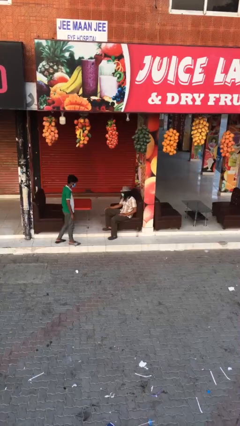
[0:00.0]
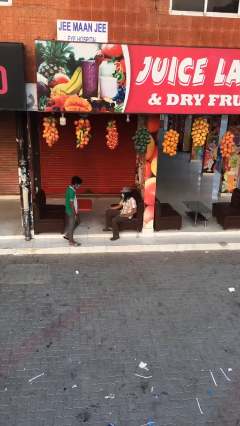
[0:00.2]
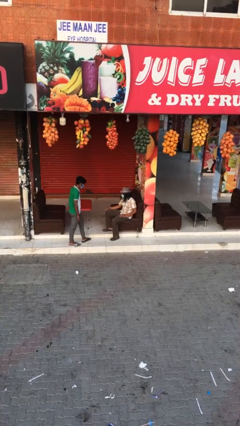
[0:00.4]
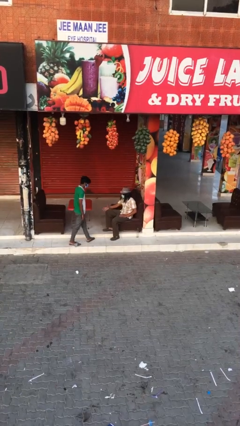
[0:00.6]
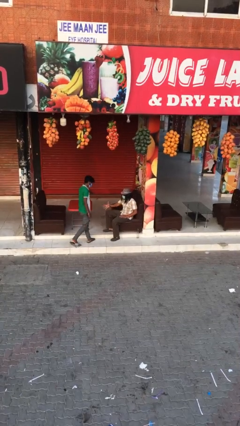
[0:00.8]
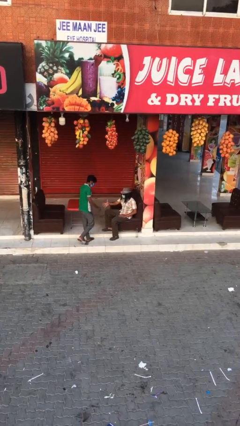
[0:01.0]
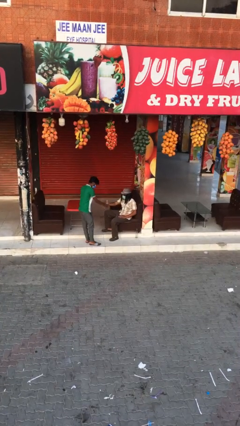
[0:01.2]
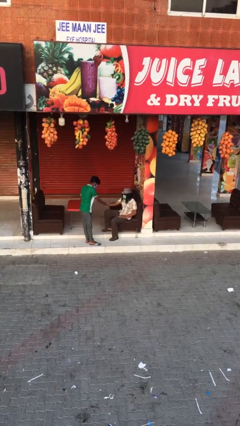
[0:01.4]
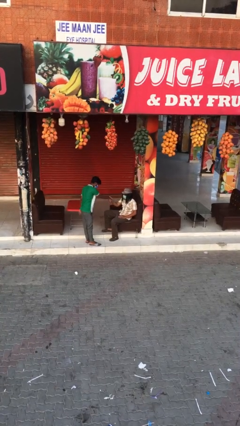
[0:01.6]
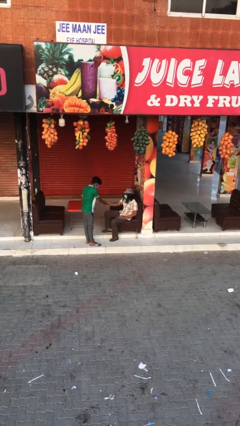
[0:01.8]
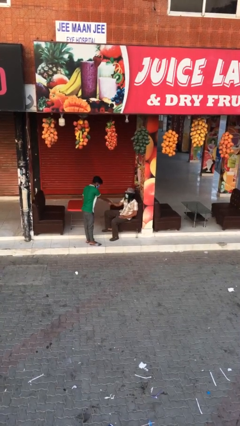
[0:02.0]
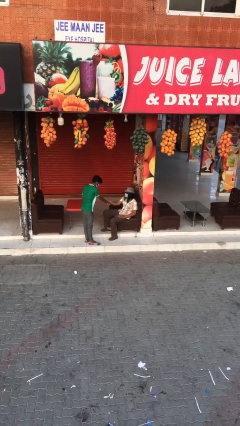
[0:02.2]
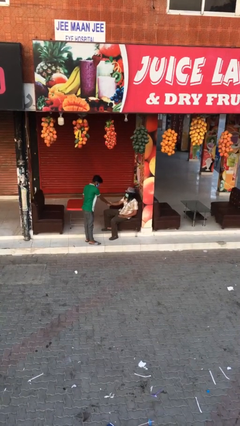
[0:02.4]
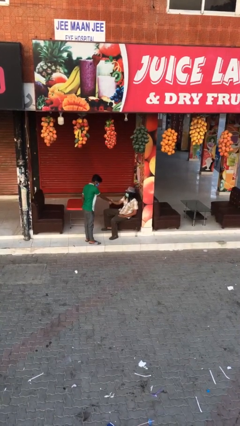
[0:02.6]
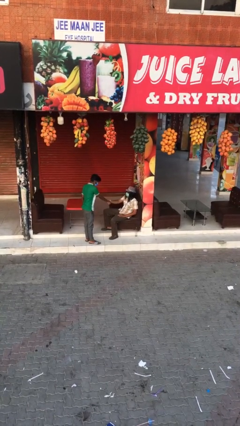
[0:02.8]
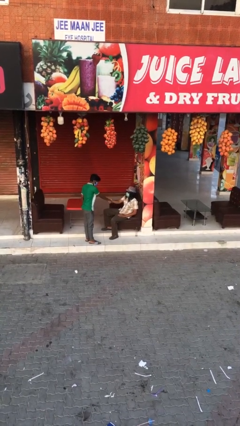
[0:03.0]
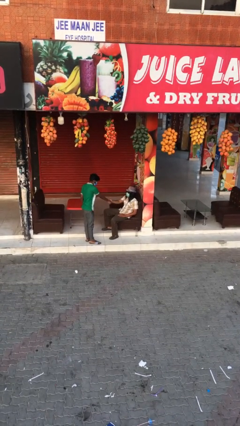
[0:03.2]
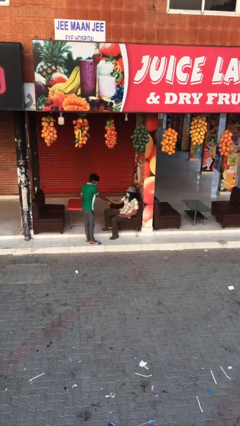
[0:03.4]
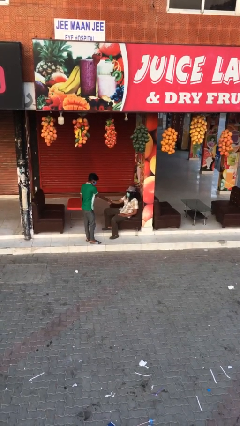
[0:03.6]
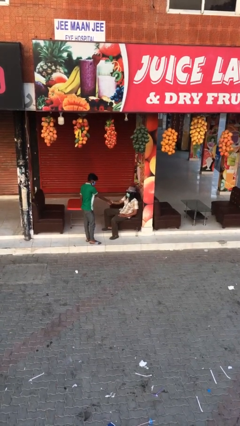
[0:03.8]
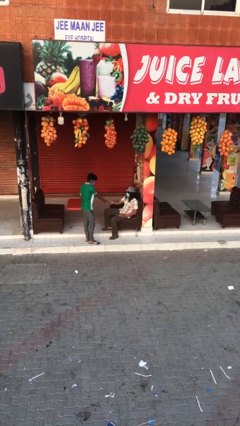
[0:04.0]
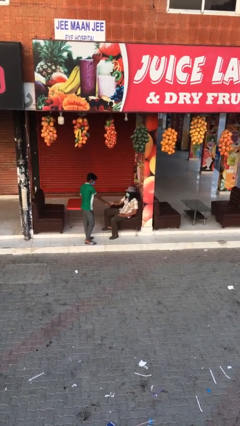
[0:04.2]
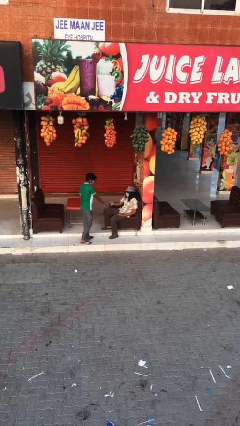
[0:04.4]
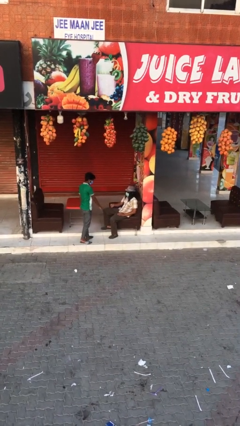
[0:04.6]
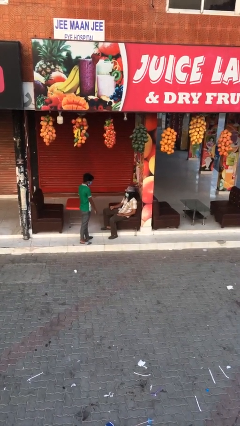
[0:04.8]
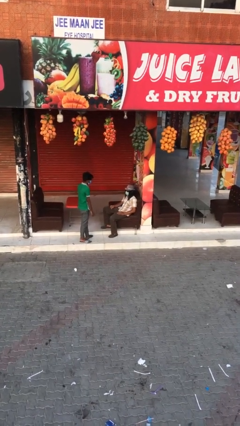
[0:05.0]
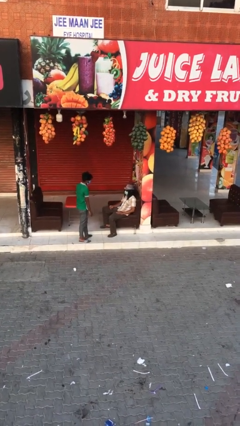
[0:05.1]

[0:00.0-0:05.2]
person shakes hand

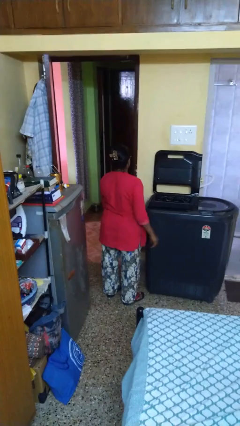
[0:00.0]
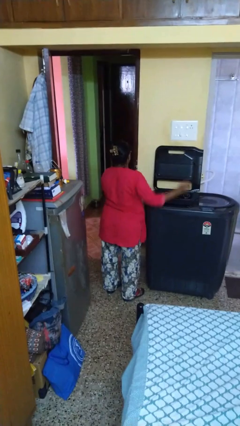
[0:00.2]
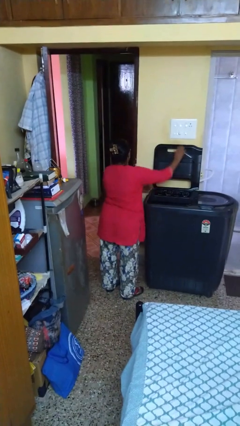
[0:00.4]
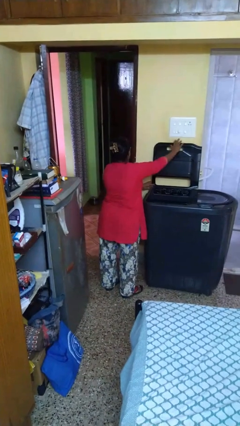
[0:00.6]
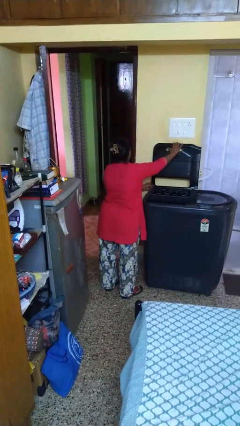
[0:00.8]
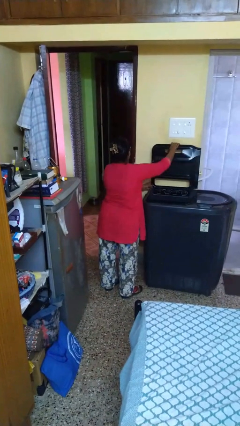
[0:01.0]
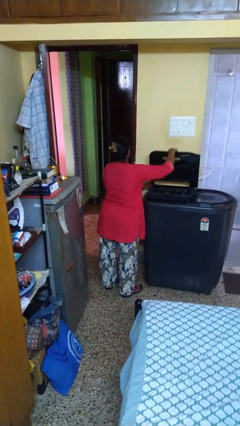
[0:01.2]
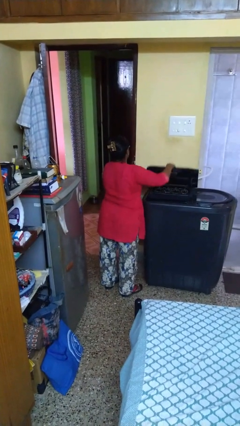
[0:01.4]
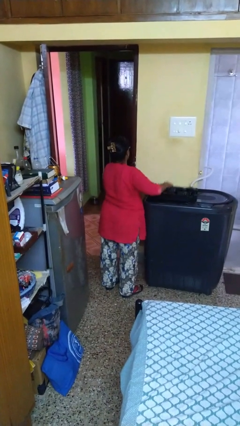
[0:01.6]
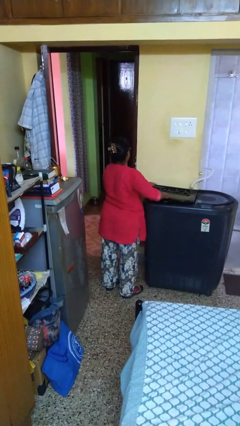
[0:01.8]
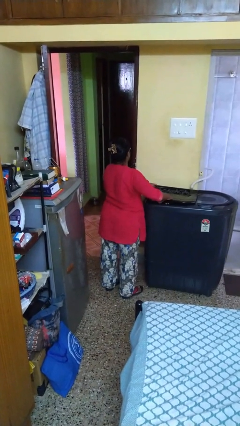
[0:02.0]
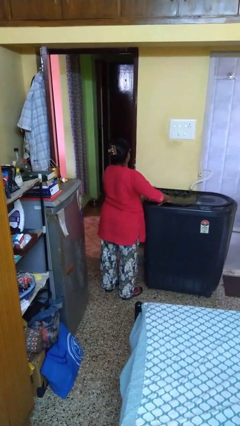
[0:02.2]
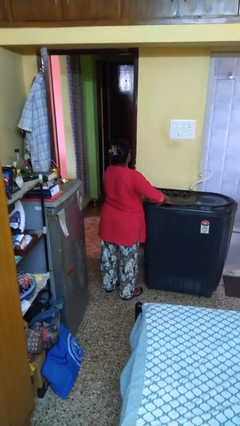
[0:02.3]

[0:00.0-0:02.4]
person closes clothes washer

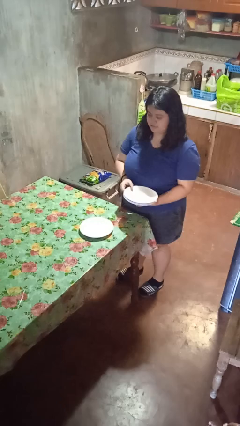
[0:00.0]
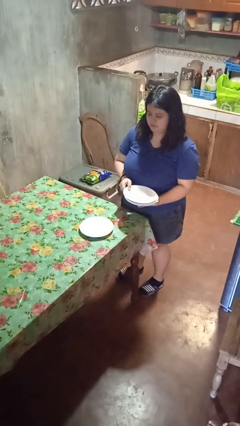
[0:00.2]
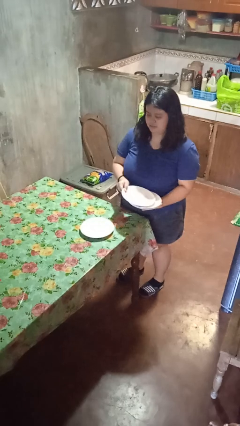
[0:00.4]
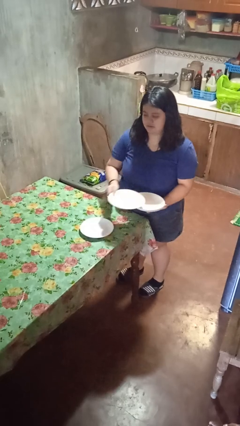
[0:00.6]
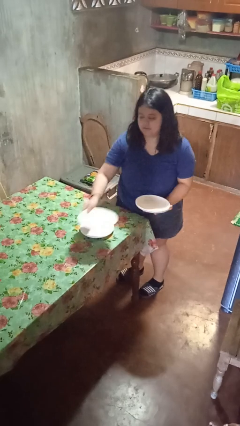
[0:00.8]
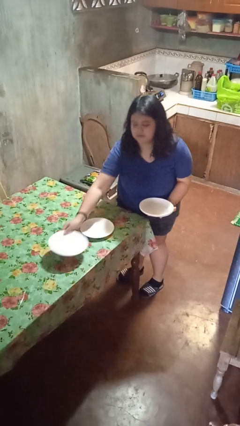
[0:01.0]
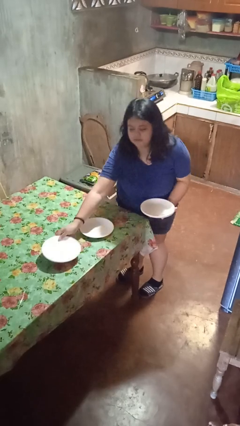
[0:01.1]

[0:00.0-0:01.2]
person sets table

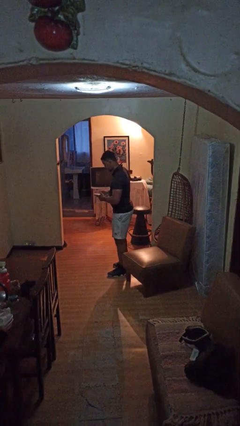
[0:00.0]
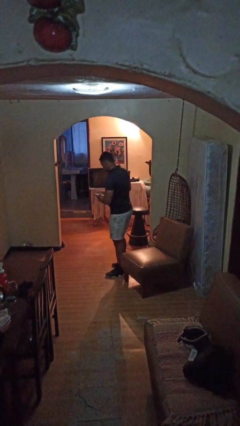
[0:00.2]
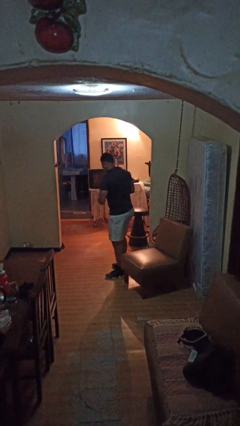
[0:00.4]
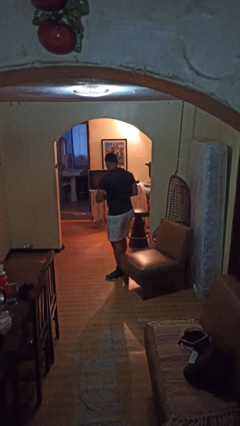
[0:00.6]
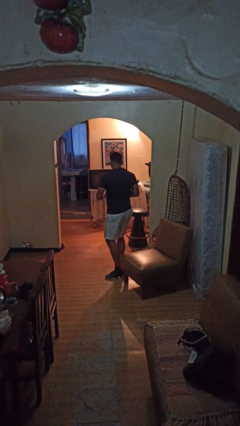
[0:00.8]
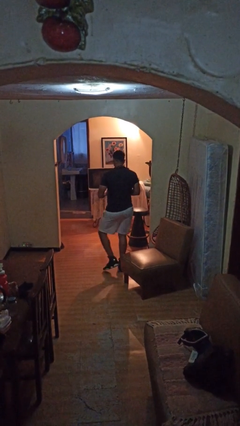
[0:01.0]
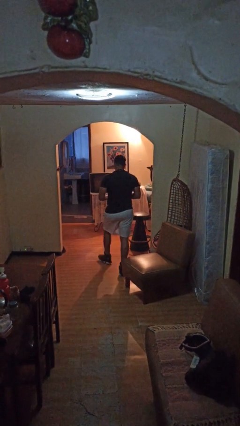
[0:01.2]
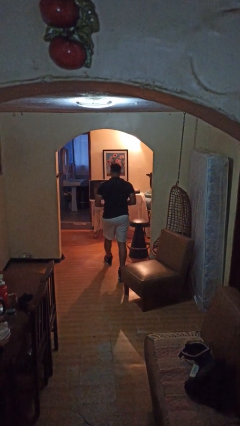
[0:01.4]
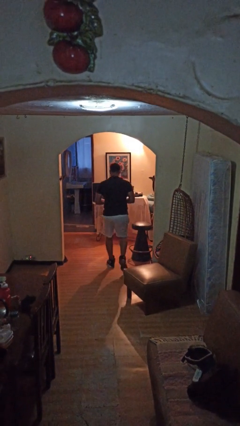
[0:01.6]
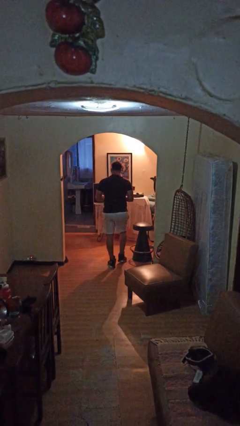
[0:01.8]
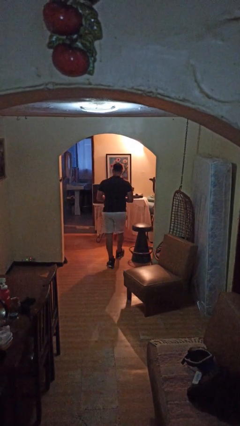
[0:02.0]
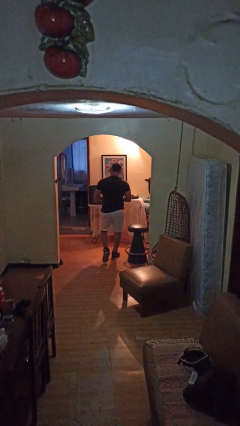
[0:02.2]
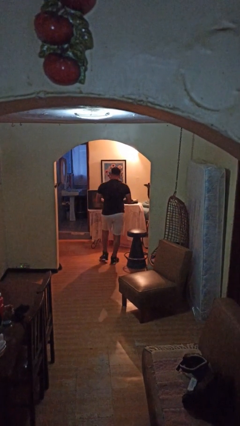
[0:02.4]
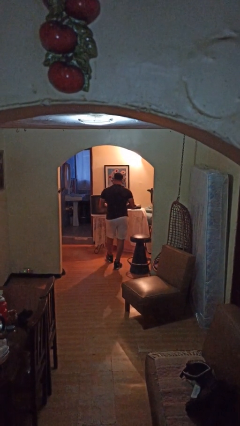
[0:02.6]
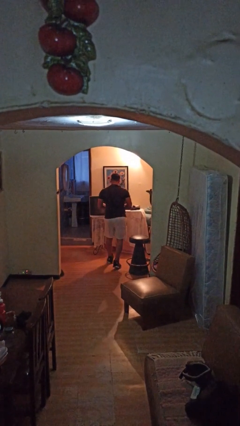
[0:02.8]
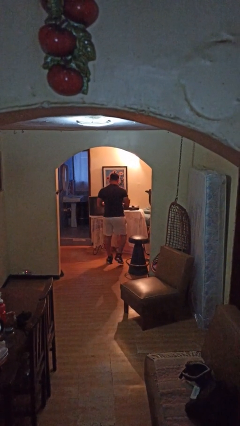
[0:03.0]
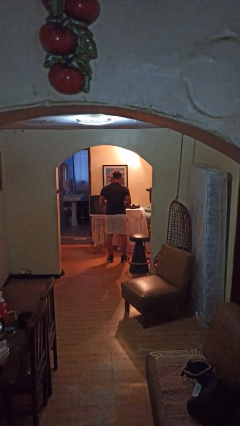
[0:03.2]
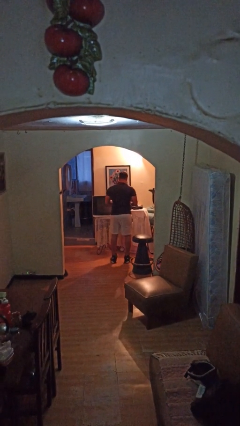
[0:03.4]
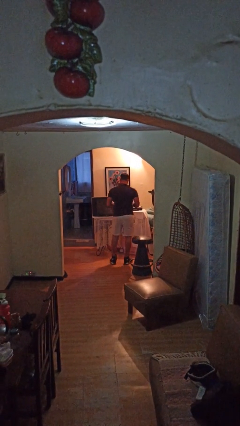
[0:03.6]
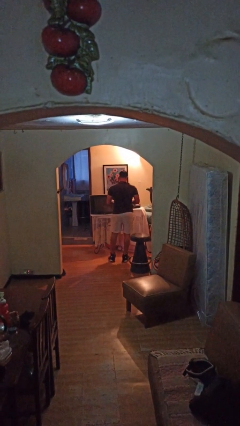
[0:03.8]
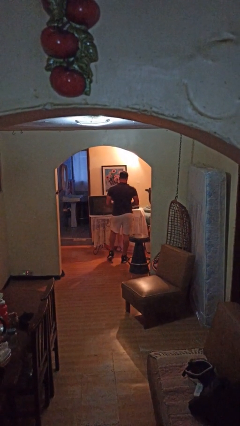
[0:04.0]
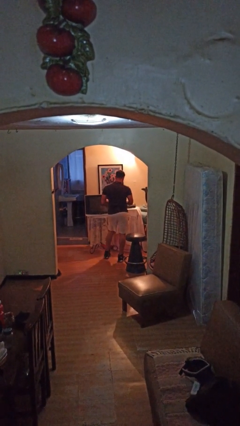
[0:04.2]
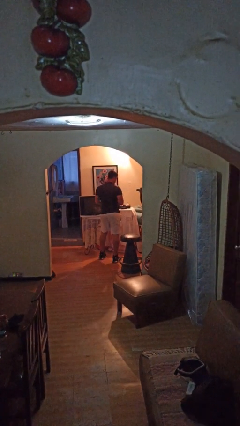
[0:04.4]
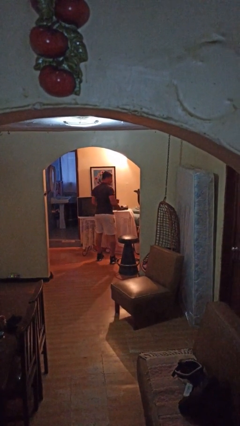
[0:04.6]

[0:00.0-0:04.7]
person exits scene through structure

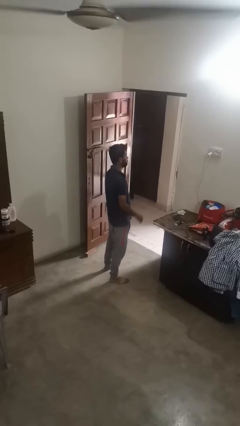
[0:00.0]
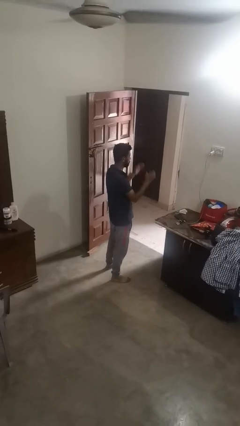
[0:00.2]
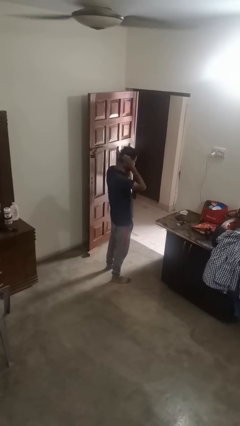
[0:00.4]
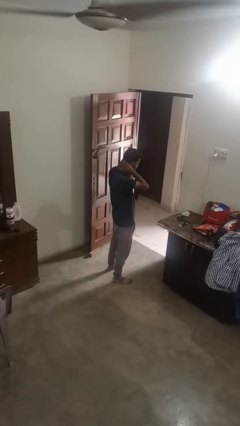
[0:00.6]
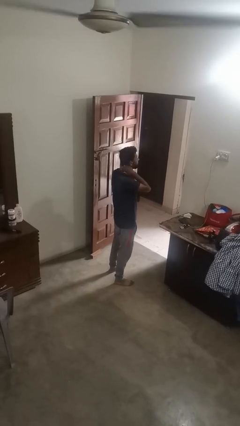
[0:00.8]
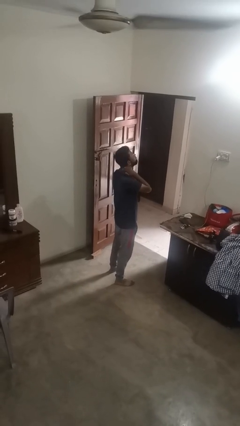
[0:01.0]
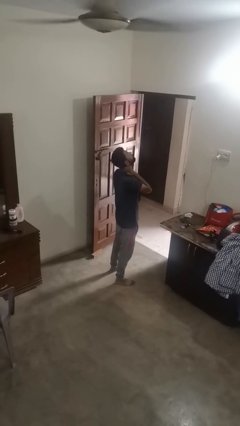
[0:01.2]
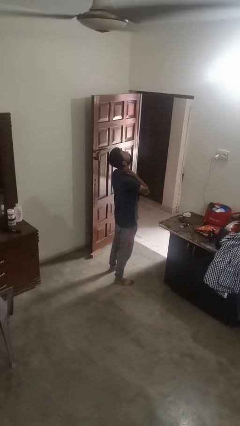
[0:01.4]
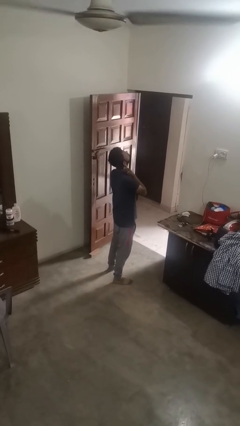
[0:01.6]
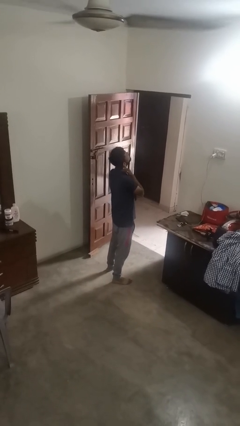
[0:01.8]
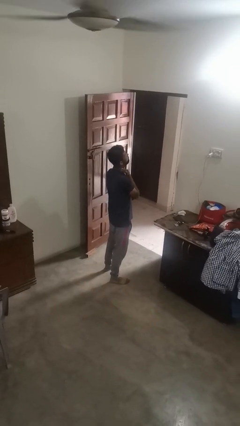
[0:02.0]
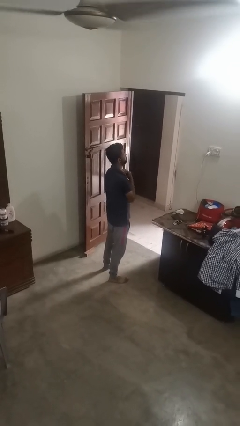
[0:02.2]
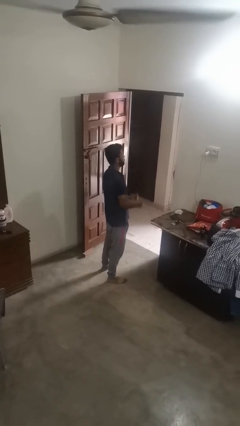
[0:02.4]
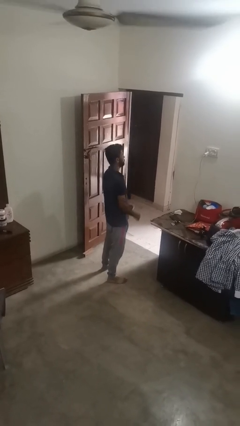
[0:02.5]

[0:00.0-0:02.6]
person rubs neck

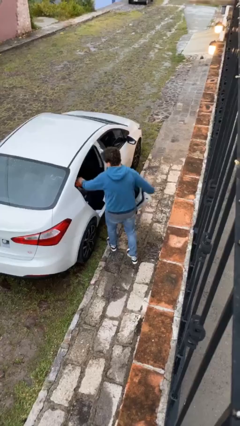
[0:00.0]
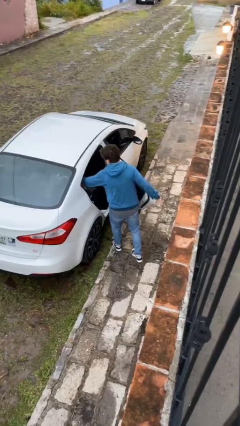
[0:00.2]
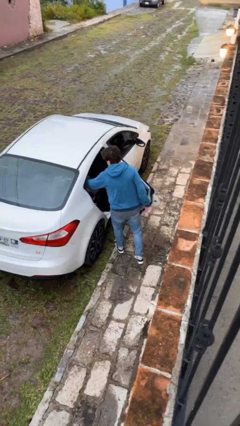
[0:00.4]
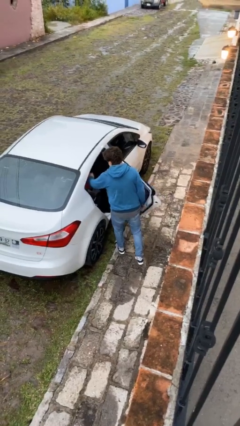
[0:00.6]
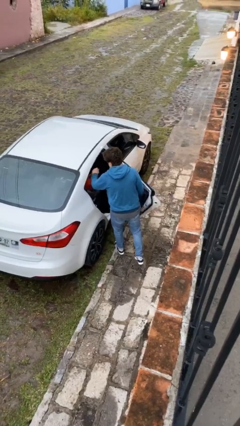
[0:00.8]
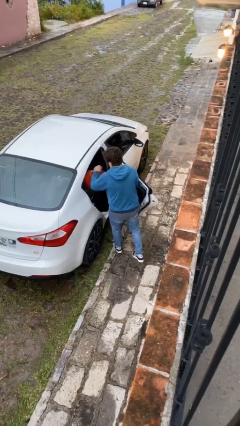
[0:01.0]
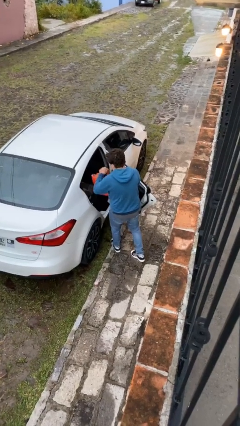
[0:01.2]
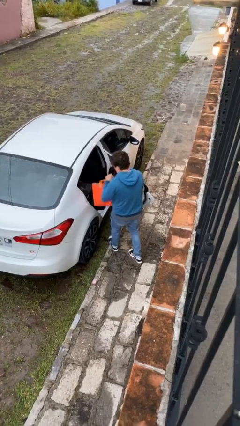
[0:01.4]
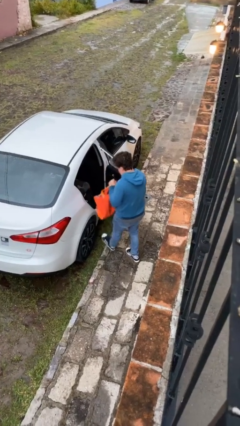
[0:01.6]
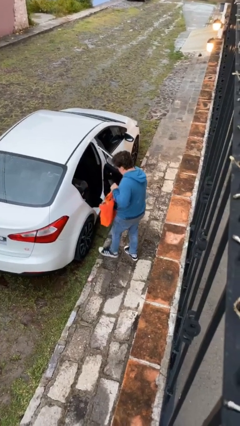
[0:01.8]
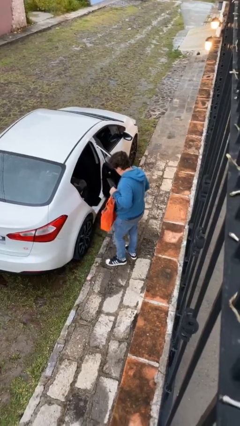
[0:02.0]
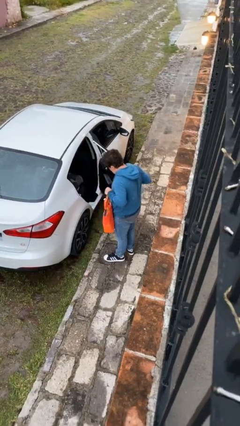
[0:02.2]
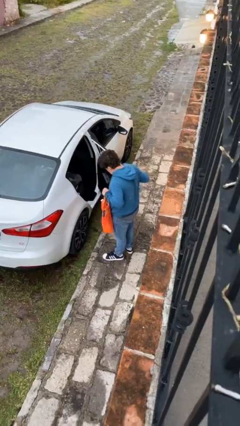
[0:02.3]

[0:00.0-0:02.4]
person unloads car
